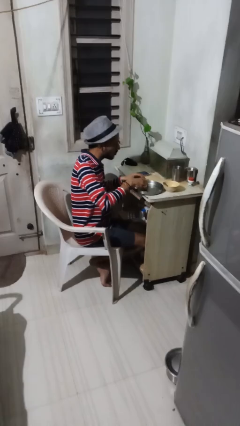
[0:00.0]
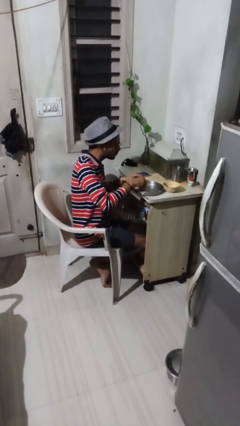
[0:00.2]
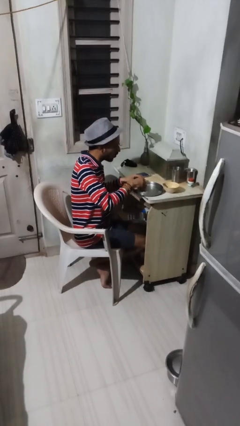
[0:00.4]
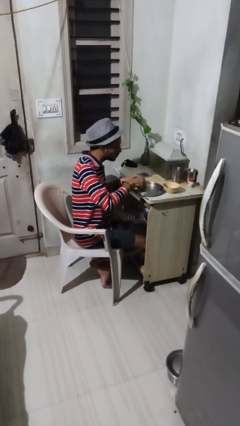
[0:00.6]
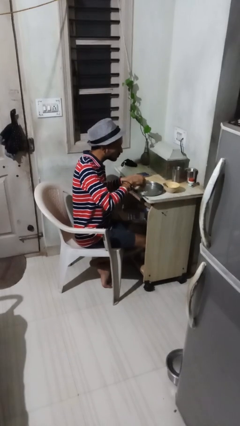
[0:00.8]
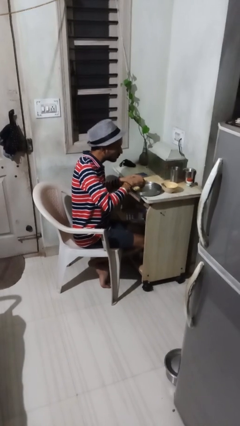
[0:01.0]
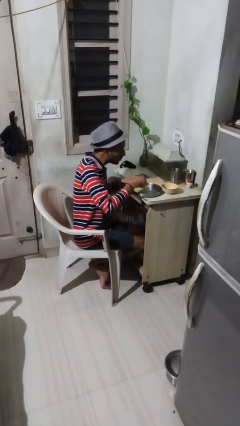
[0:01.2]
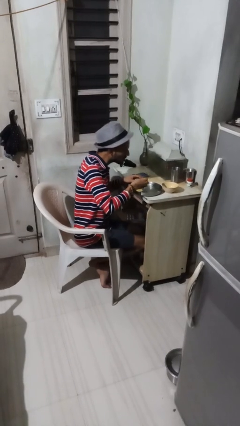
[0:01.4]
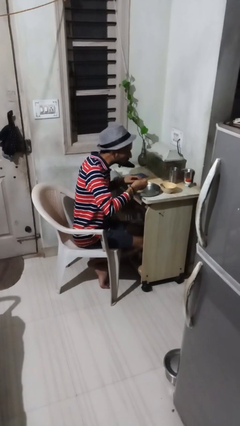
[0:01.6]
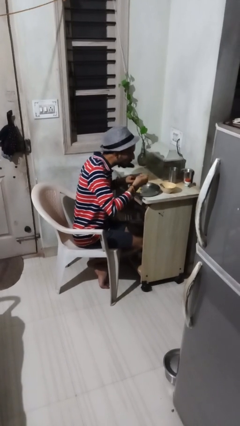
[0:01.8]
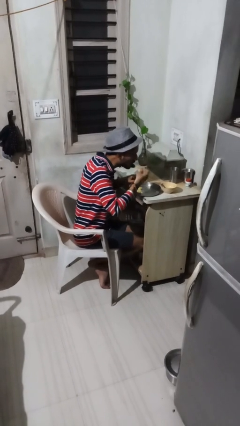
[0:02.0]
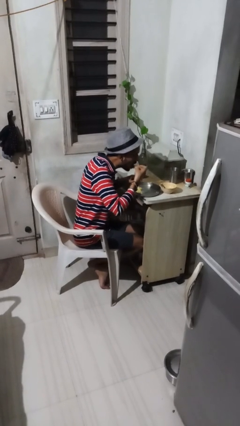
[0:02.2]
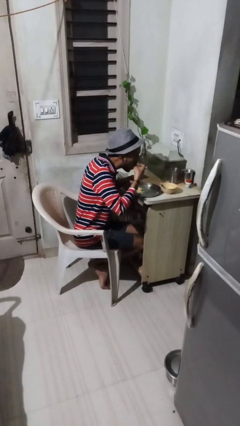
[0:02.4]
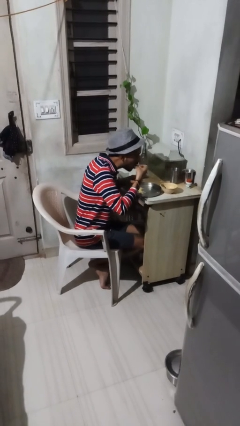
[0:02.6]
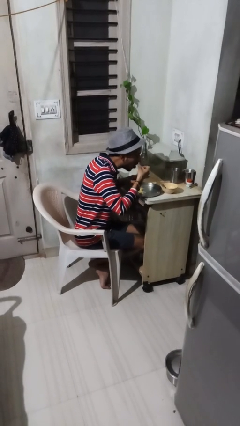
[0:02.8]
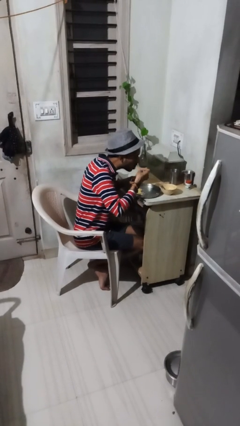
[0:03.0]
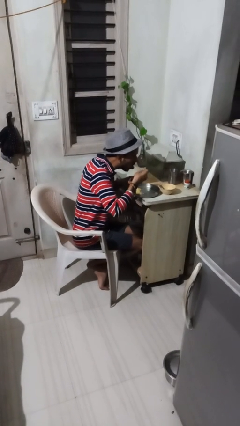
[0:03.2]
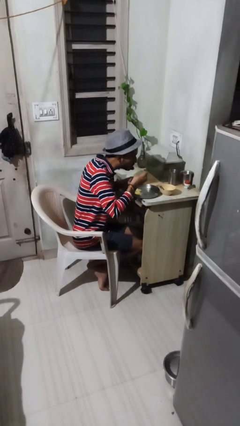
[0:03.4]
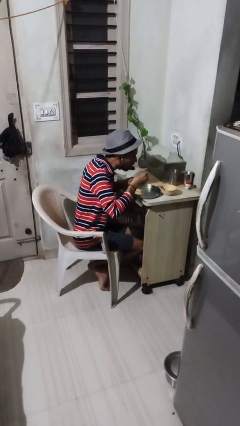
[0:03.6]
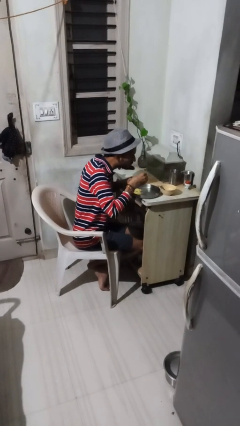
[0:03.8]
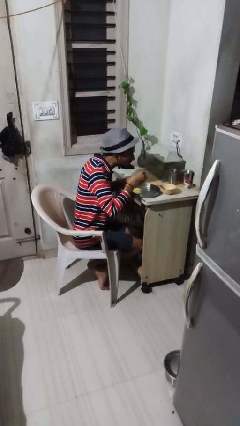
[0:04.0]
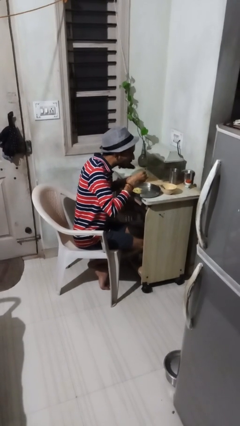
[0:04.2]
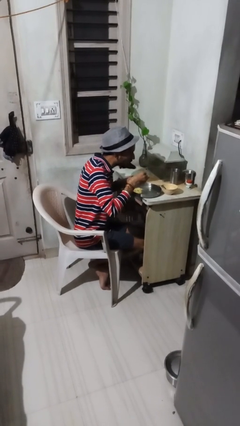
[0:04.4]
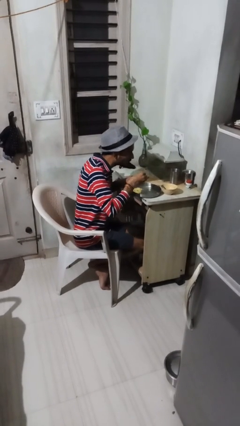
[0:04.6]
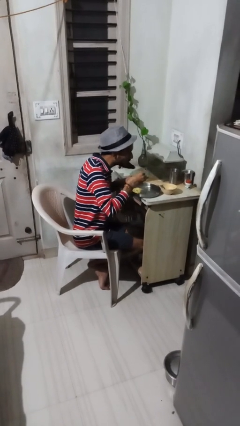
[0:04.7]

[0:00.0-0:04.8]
person eats with utensil

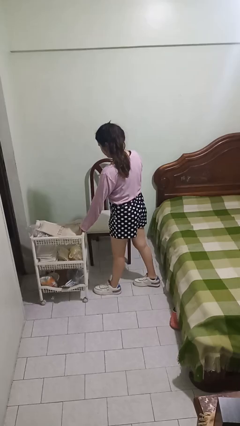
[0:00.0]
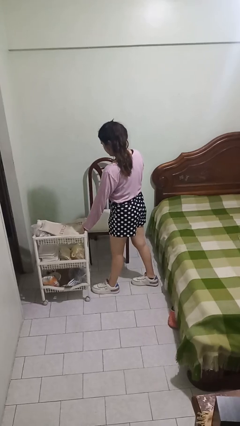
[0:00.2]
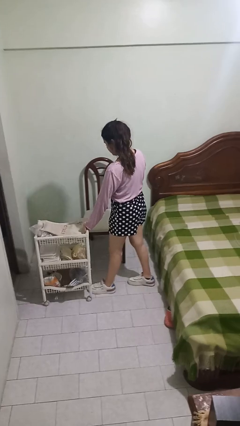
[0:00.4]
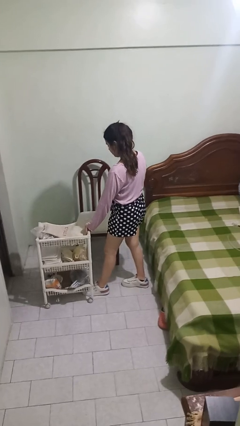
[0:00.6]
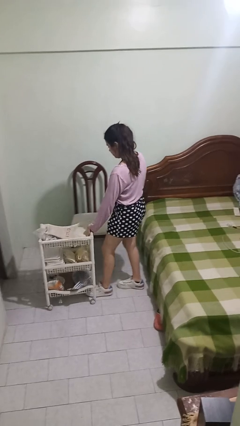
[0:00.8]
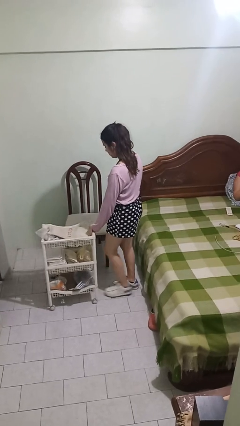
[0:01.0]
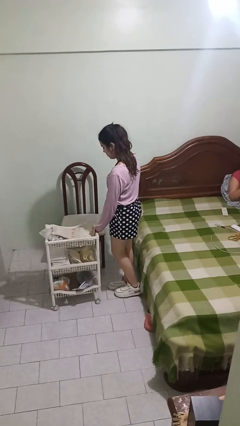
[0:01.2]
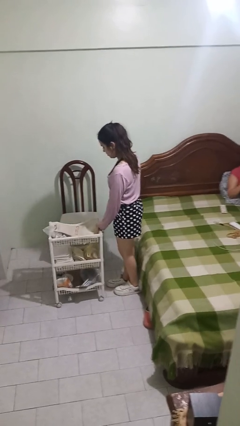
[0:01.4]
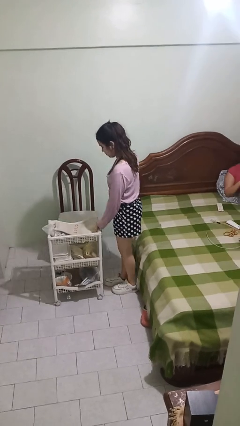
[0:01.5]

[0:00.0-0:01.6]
person pulls wheeled cart

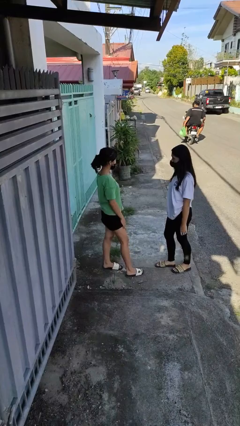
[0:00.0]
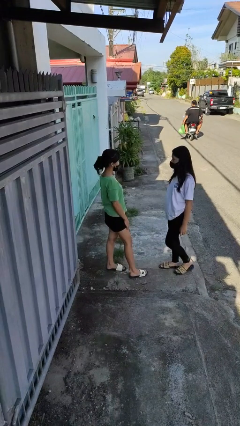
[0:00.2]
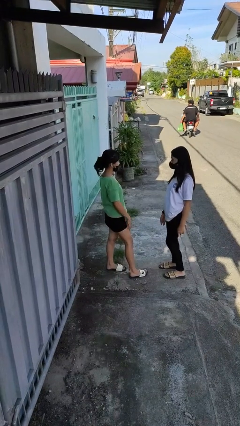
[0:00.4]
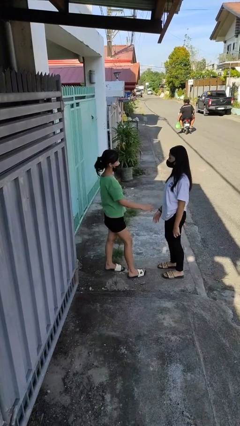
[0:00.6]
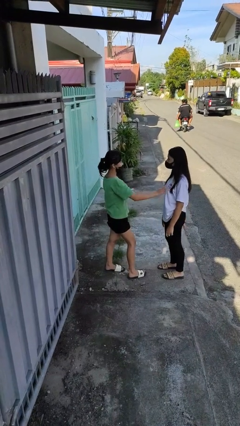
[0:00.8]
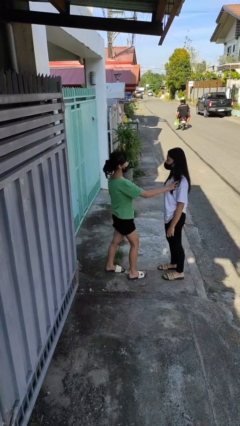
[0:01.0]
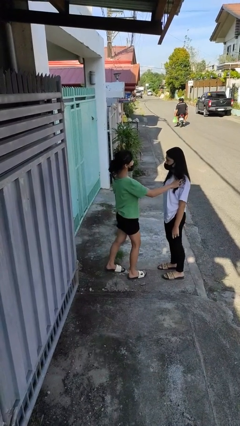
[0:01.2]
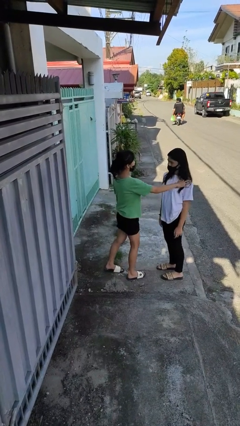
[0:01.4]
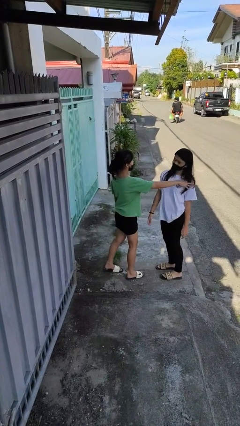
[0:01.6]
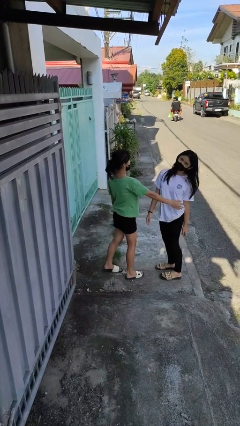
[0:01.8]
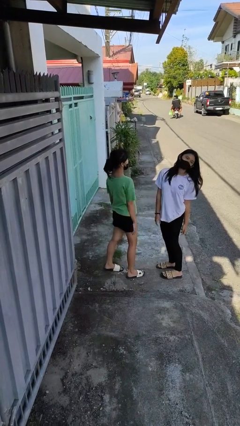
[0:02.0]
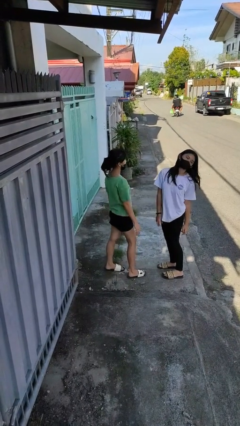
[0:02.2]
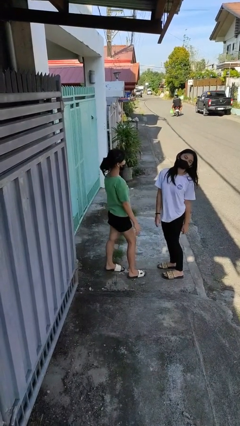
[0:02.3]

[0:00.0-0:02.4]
person shoves person

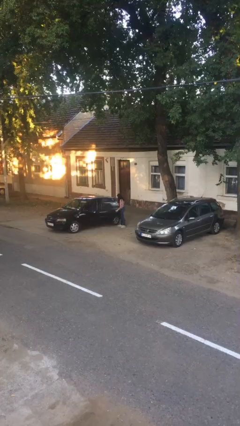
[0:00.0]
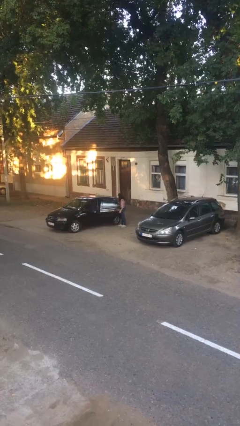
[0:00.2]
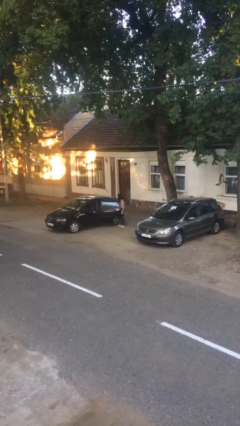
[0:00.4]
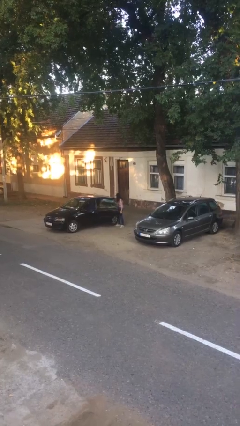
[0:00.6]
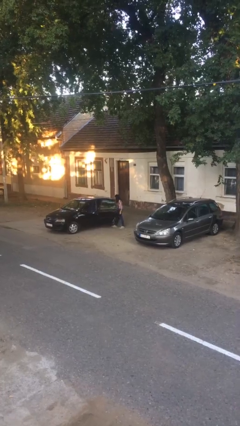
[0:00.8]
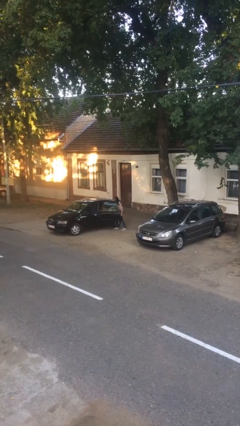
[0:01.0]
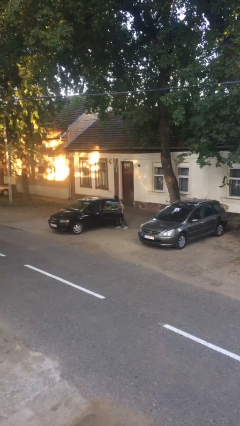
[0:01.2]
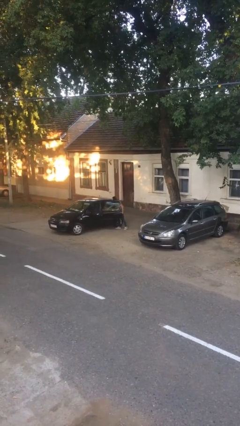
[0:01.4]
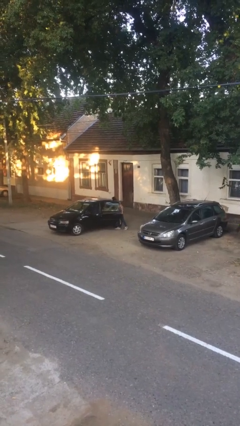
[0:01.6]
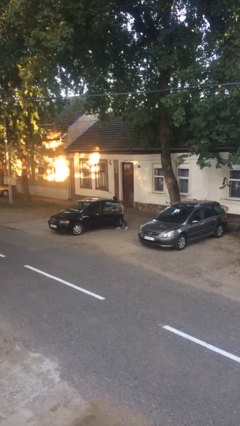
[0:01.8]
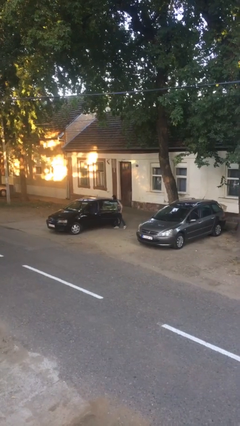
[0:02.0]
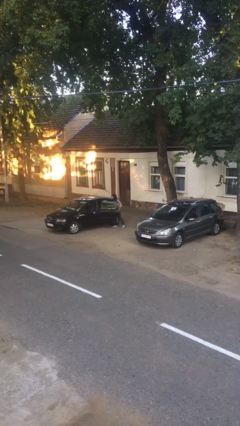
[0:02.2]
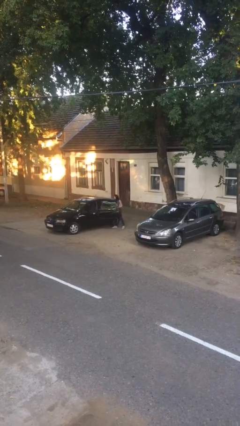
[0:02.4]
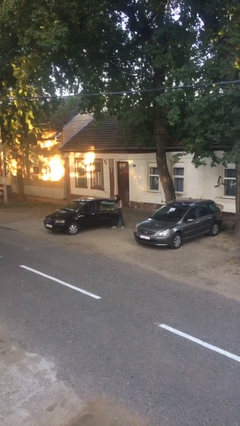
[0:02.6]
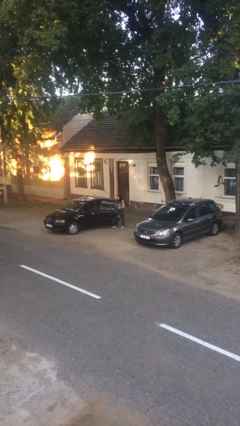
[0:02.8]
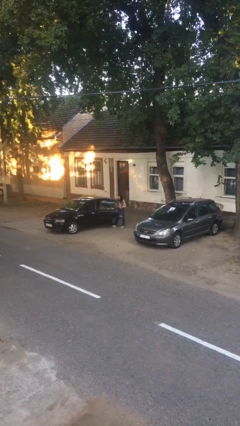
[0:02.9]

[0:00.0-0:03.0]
person unloads car

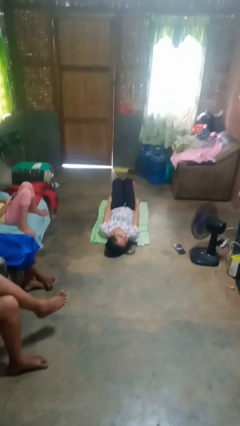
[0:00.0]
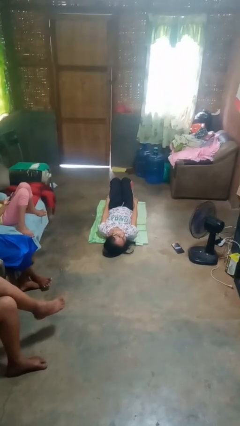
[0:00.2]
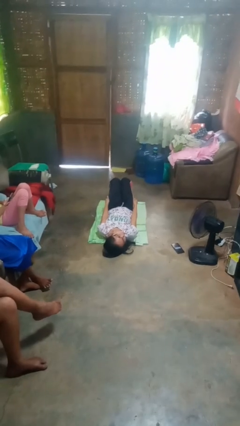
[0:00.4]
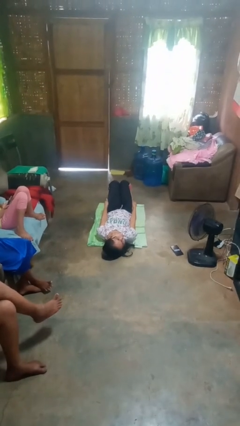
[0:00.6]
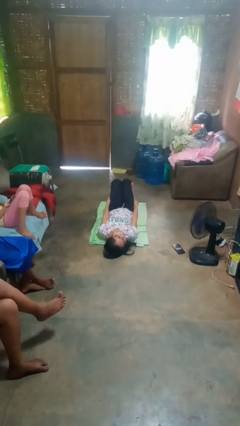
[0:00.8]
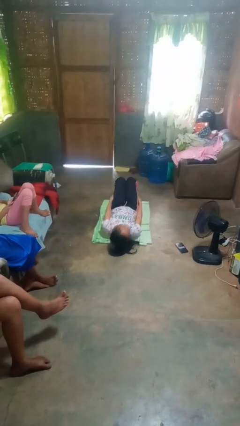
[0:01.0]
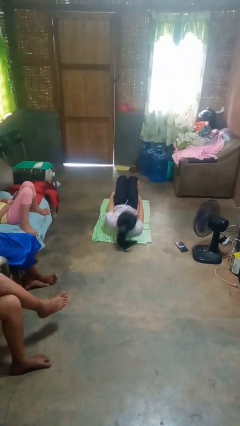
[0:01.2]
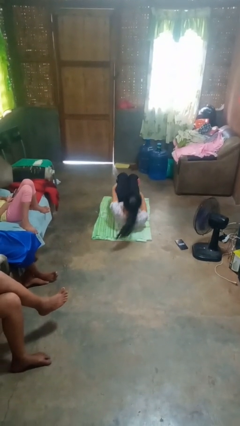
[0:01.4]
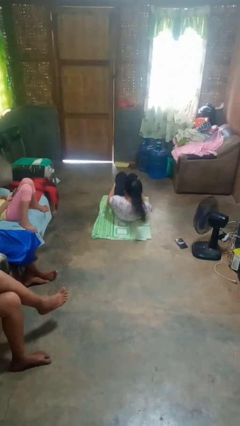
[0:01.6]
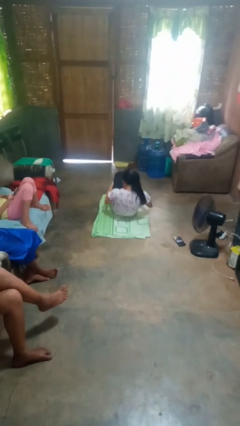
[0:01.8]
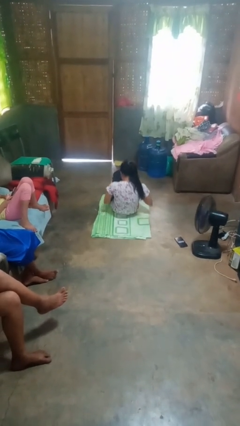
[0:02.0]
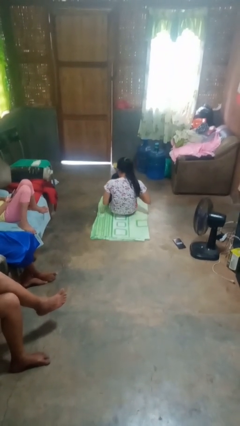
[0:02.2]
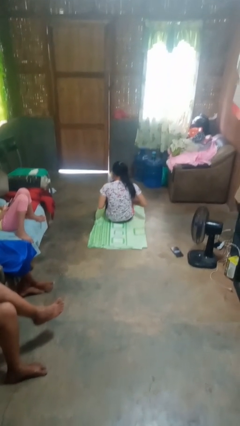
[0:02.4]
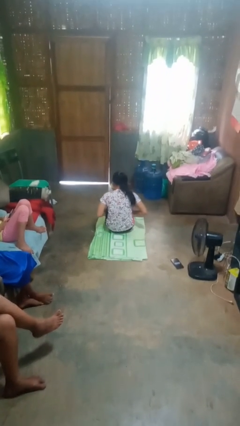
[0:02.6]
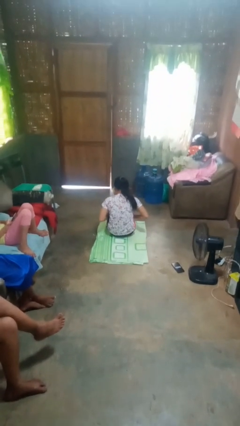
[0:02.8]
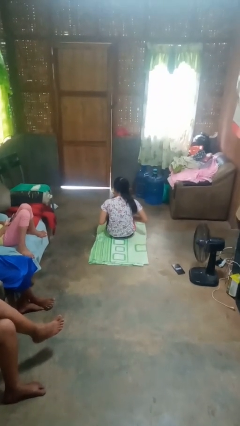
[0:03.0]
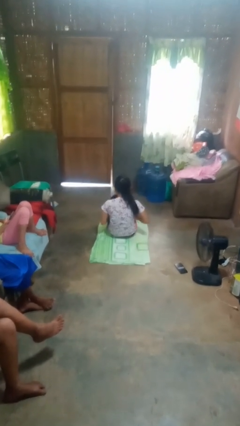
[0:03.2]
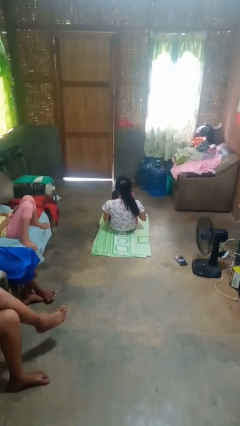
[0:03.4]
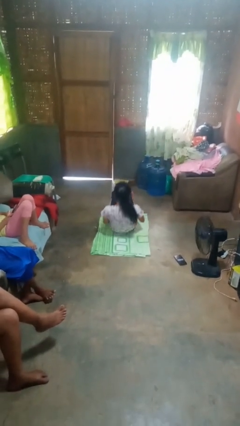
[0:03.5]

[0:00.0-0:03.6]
person exercises with situp

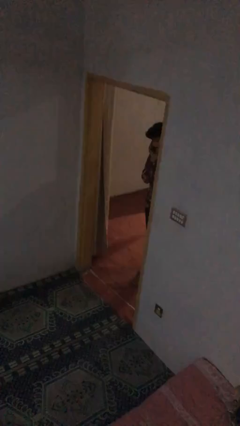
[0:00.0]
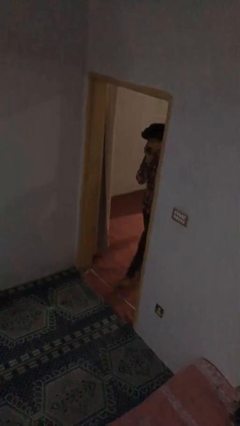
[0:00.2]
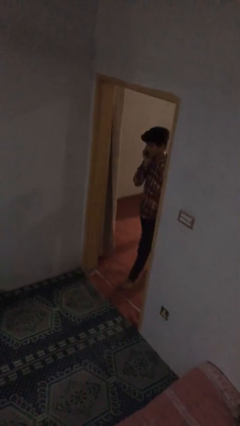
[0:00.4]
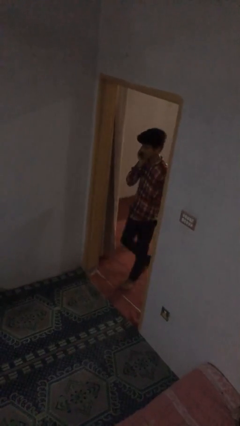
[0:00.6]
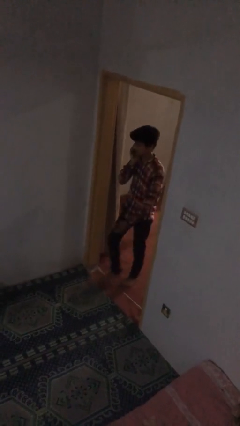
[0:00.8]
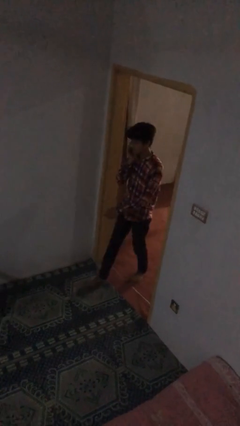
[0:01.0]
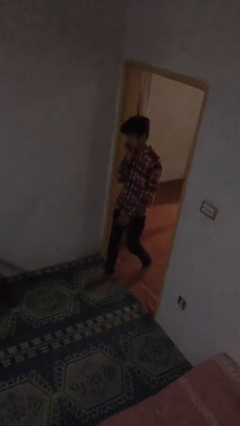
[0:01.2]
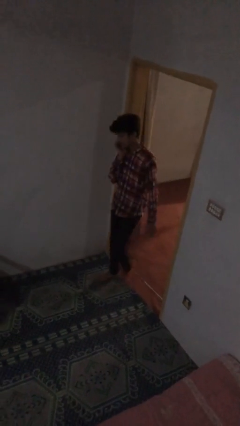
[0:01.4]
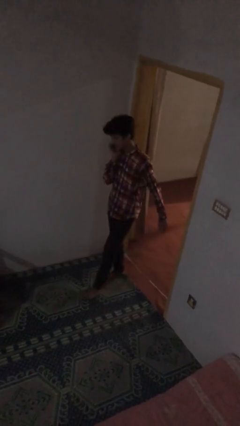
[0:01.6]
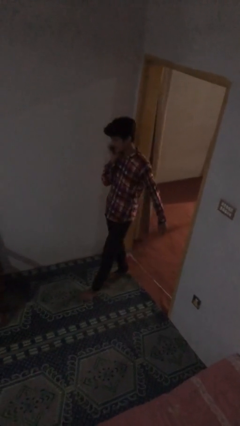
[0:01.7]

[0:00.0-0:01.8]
person enters scene through structure

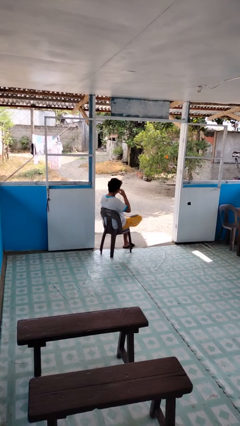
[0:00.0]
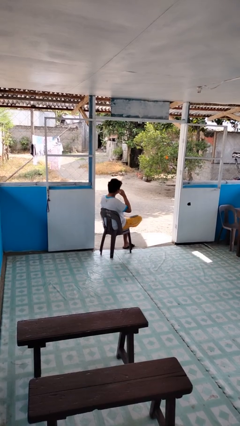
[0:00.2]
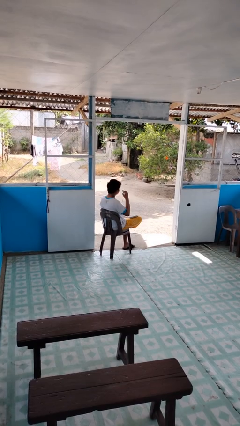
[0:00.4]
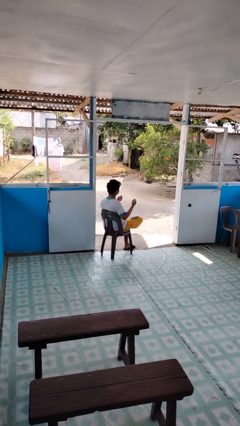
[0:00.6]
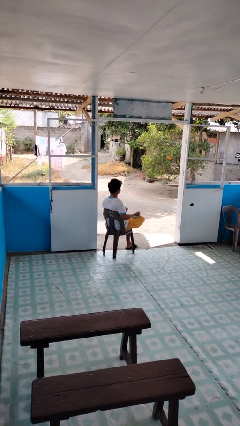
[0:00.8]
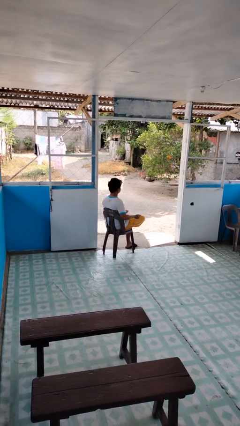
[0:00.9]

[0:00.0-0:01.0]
person takes off headphones
